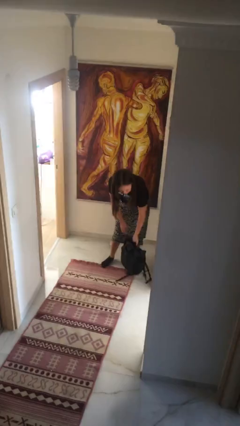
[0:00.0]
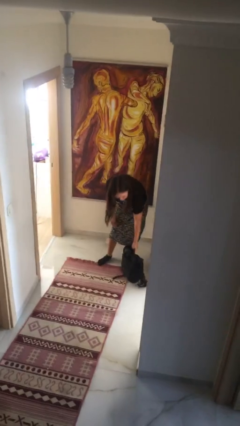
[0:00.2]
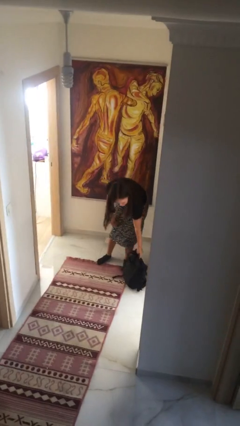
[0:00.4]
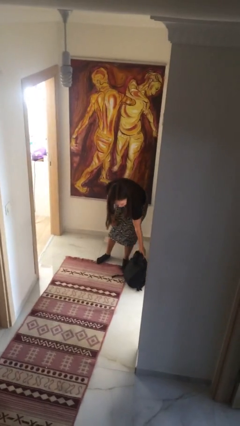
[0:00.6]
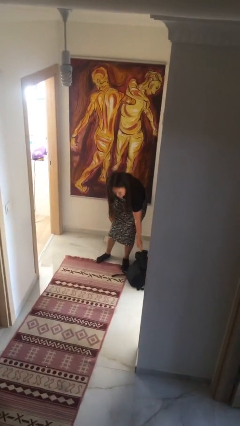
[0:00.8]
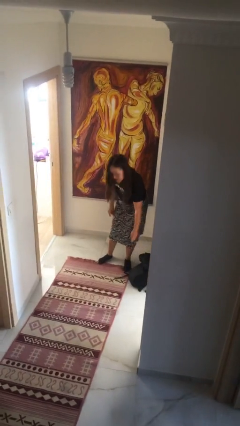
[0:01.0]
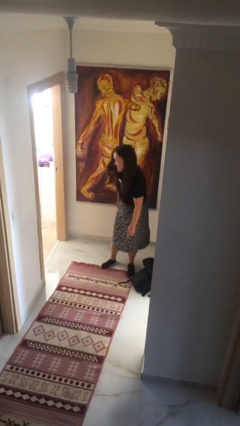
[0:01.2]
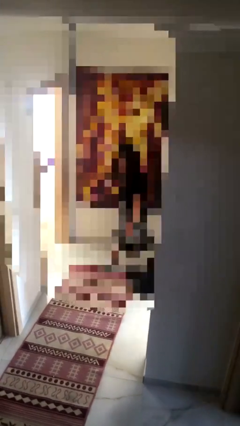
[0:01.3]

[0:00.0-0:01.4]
person puts down object on floor

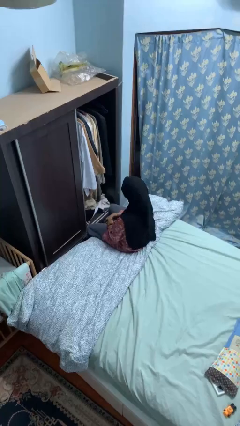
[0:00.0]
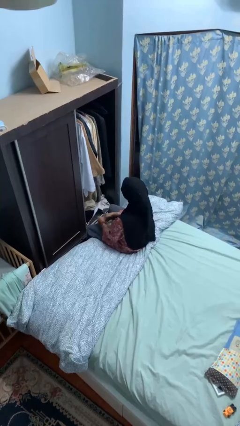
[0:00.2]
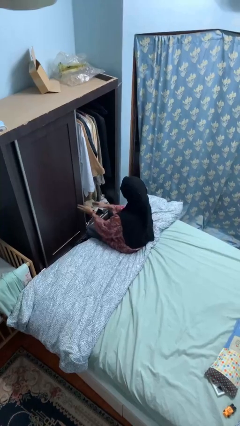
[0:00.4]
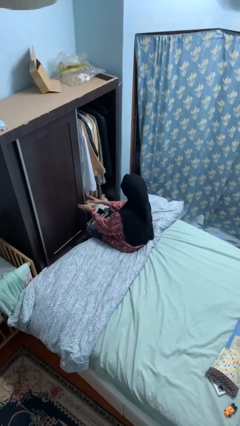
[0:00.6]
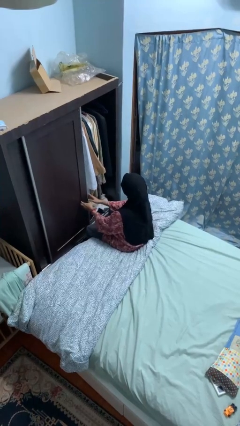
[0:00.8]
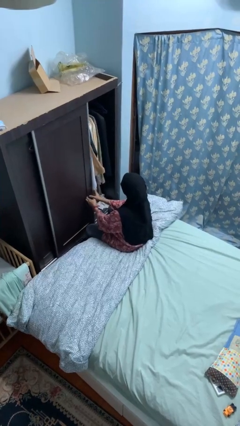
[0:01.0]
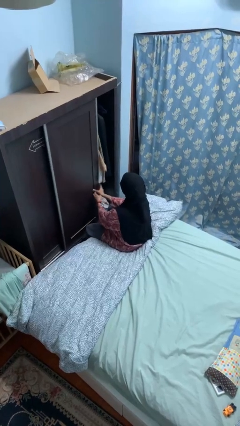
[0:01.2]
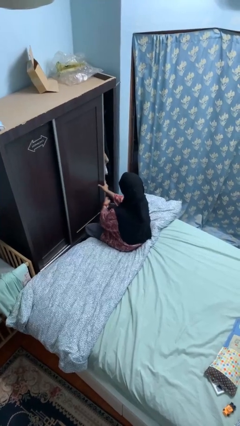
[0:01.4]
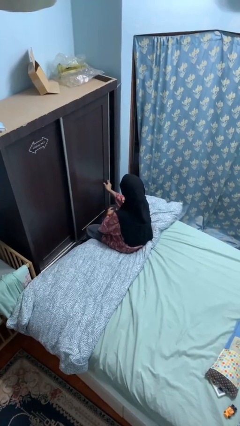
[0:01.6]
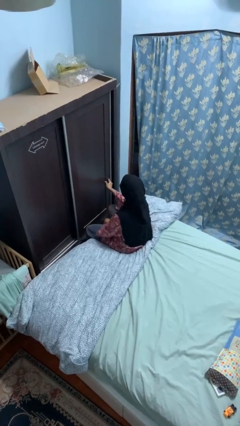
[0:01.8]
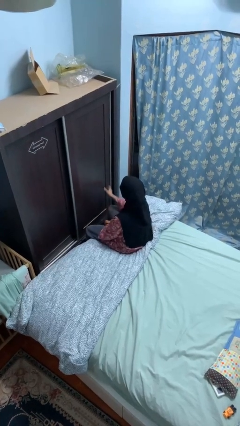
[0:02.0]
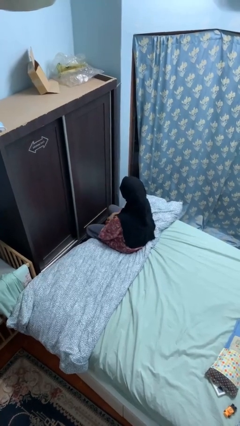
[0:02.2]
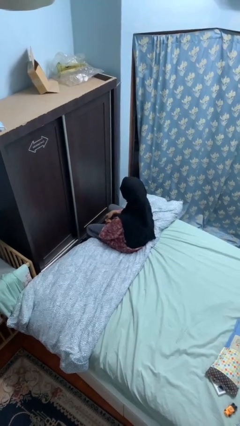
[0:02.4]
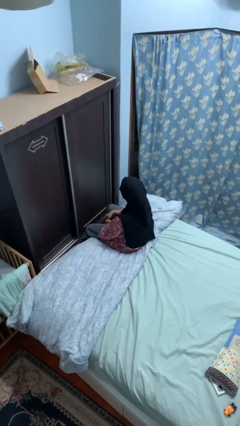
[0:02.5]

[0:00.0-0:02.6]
person closes closet door

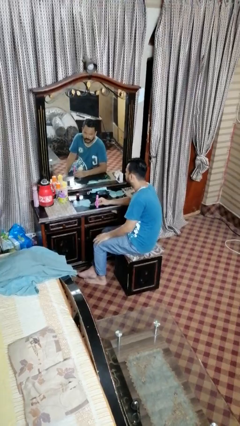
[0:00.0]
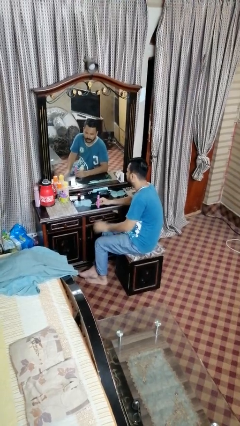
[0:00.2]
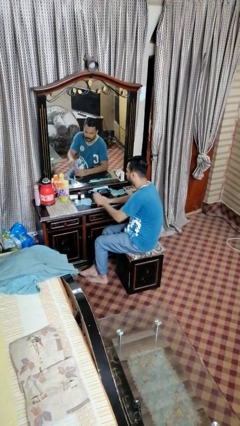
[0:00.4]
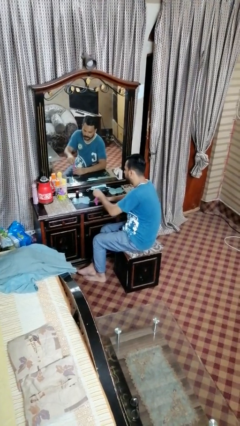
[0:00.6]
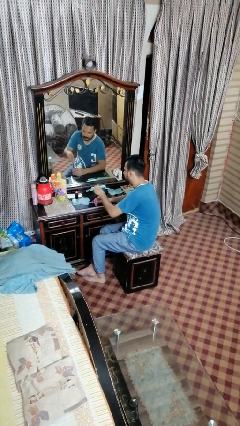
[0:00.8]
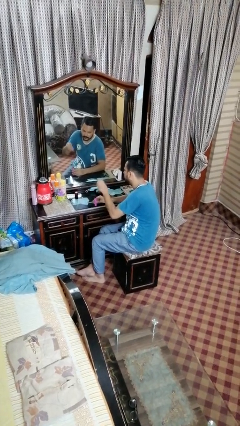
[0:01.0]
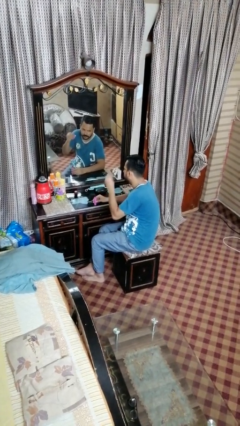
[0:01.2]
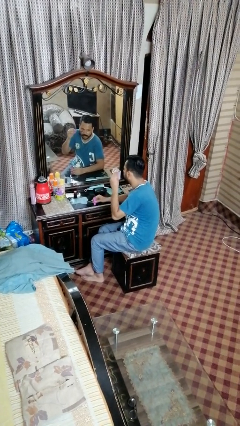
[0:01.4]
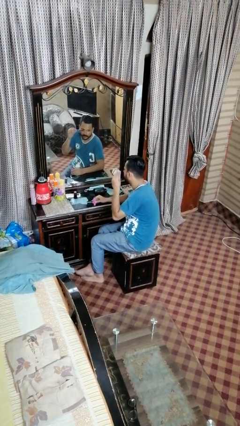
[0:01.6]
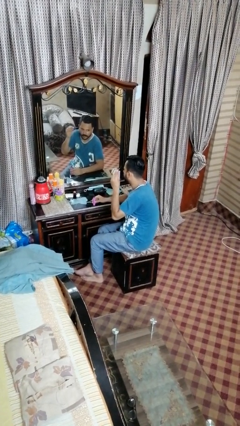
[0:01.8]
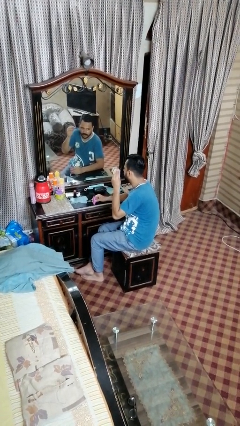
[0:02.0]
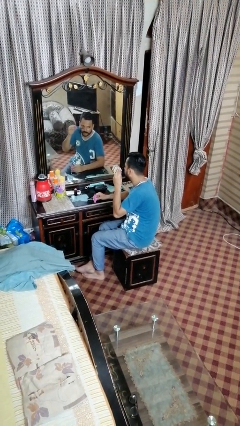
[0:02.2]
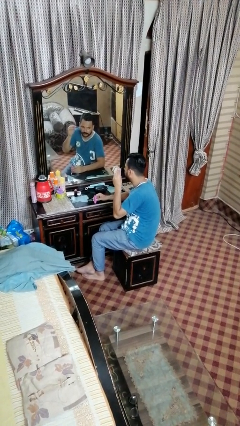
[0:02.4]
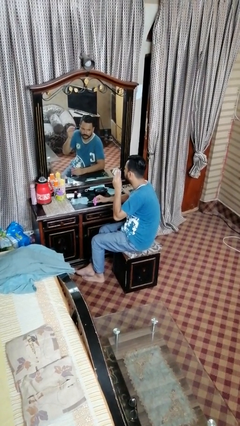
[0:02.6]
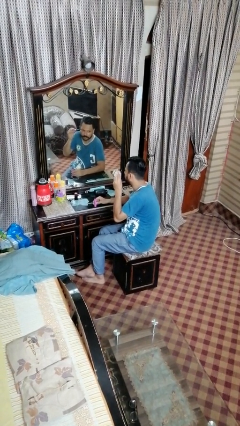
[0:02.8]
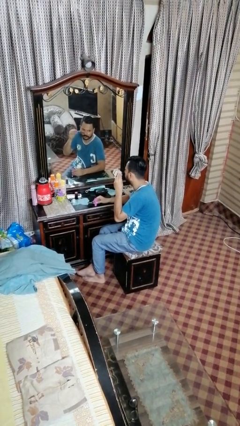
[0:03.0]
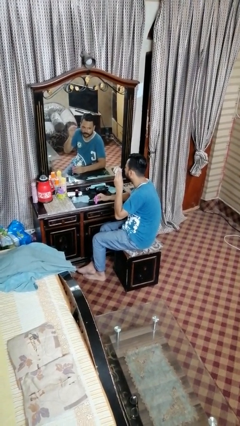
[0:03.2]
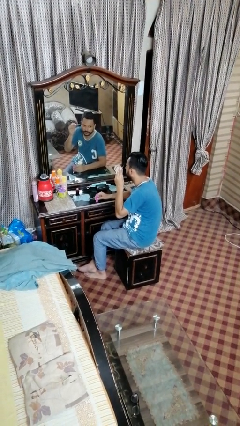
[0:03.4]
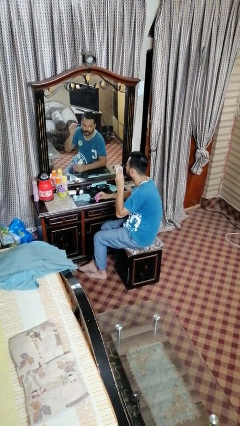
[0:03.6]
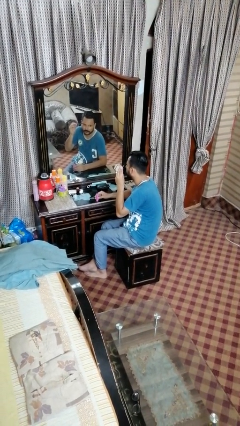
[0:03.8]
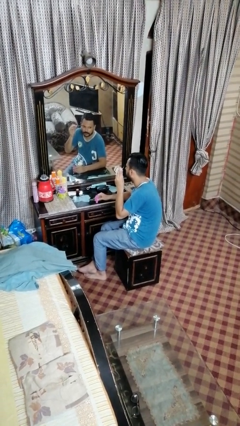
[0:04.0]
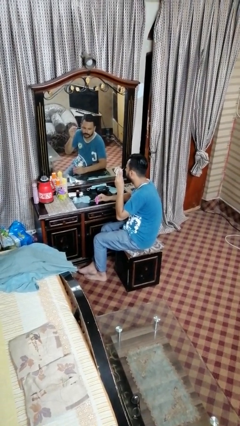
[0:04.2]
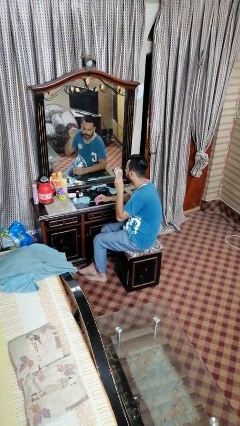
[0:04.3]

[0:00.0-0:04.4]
person applies eye makeup

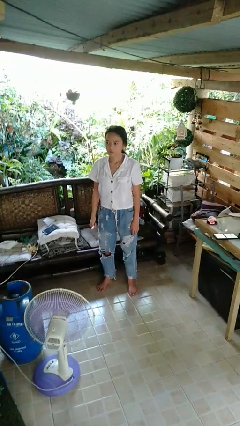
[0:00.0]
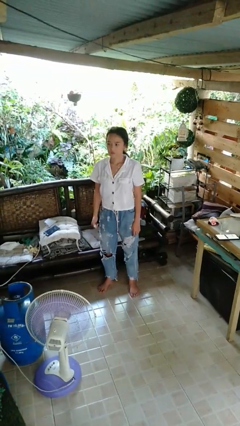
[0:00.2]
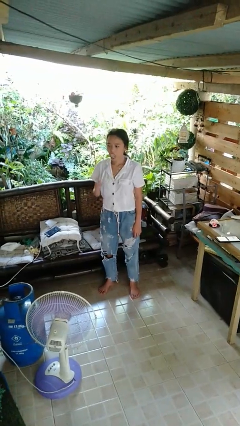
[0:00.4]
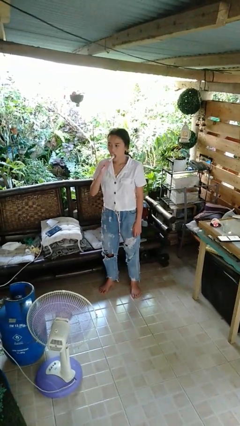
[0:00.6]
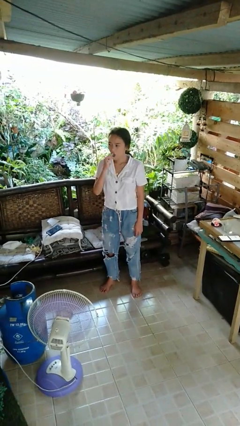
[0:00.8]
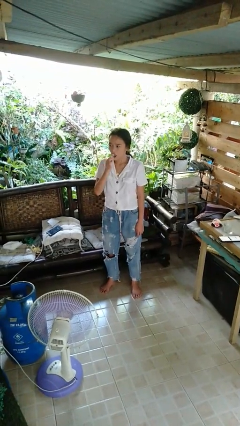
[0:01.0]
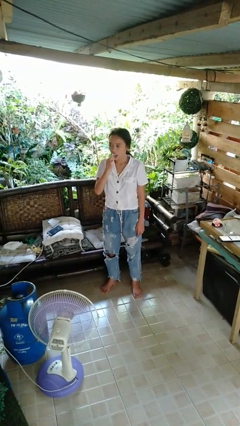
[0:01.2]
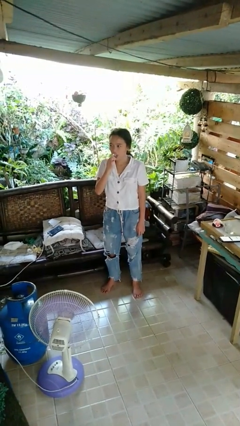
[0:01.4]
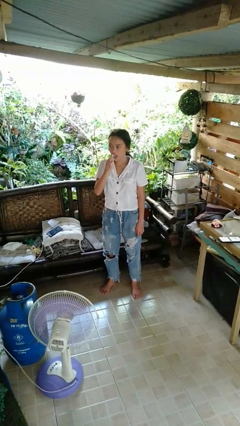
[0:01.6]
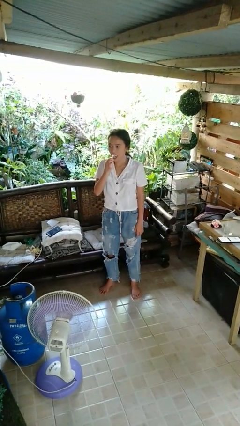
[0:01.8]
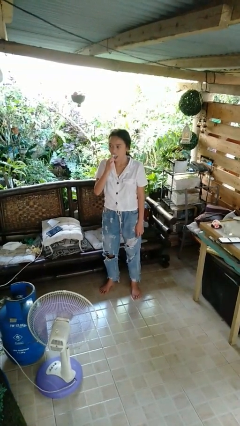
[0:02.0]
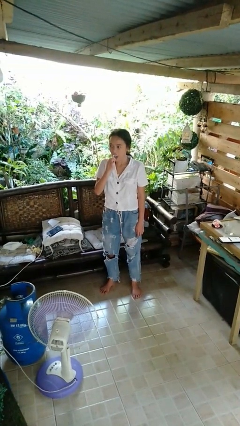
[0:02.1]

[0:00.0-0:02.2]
person brushes teeth

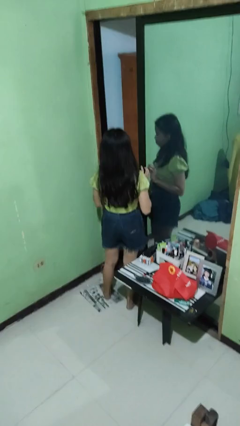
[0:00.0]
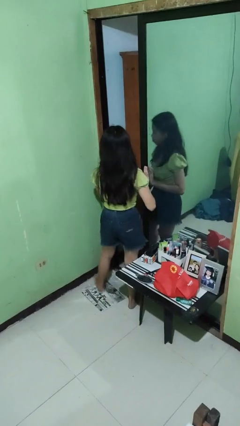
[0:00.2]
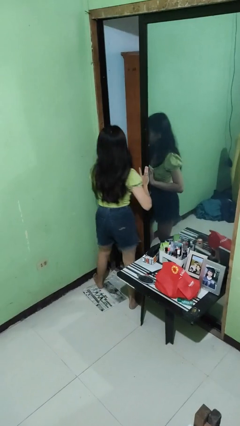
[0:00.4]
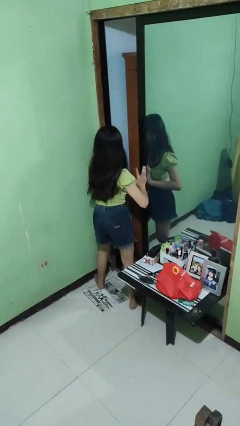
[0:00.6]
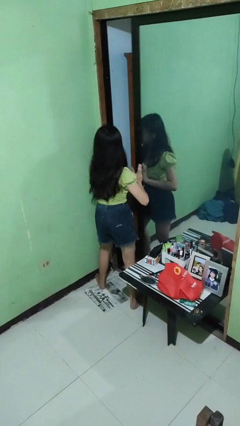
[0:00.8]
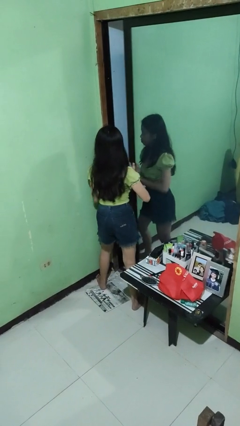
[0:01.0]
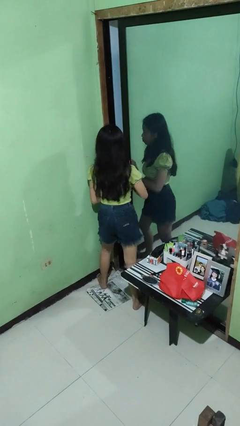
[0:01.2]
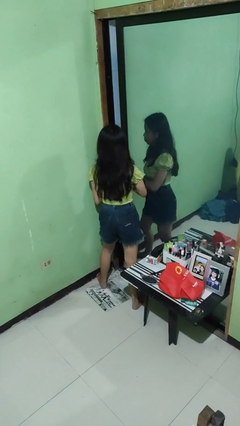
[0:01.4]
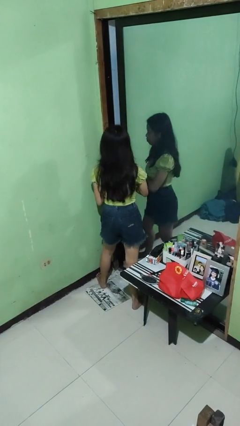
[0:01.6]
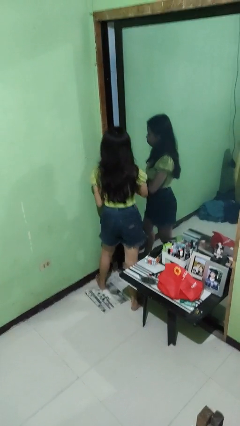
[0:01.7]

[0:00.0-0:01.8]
person closes sliding door

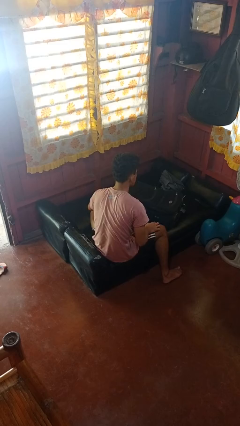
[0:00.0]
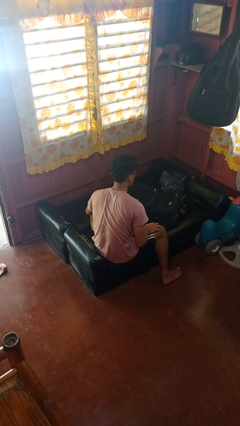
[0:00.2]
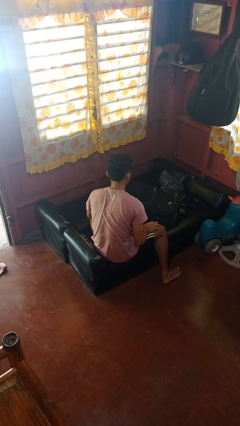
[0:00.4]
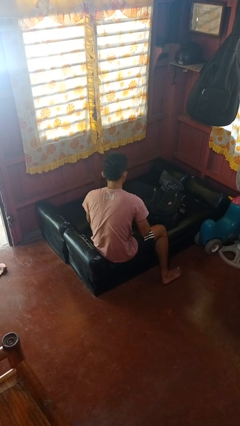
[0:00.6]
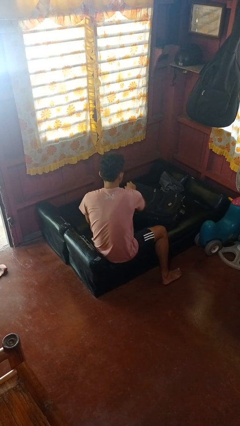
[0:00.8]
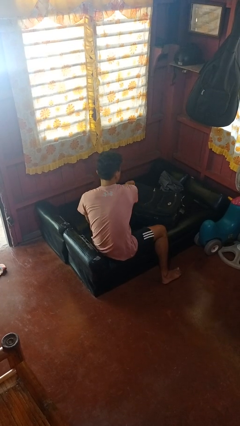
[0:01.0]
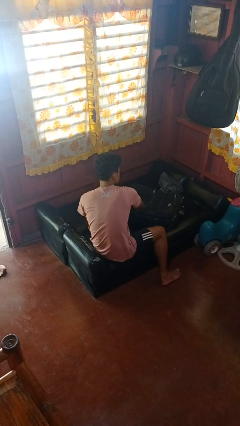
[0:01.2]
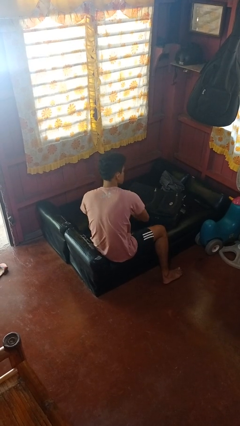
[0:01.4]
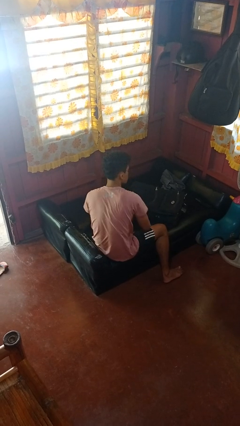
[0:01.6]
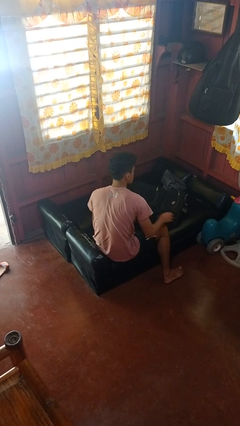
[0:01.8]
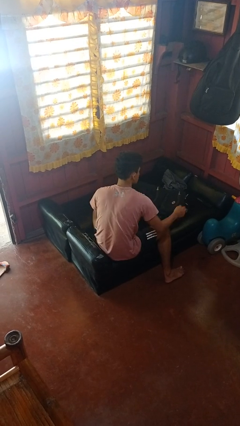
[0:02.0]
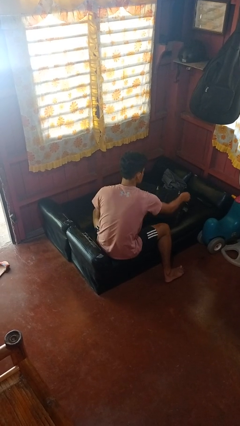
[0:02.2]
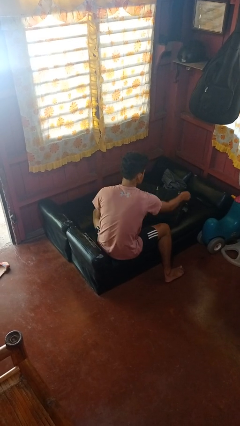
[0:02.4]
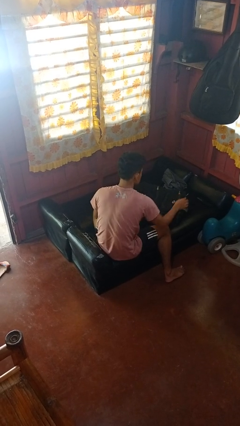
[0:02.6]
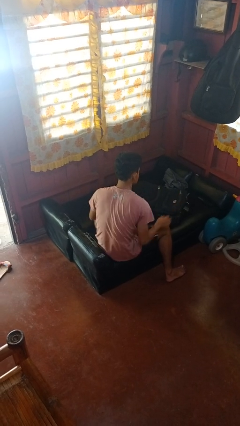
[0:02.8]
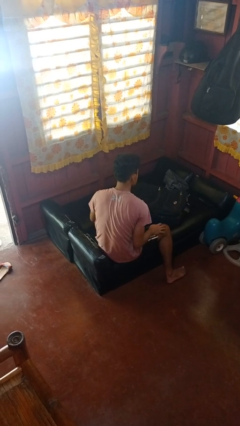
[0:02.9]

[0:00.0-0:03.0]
person closes suitcase

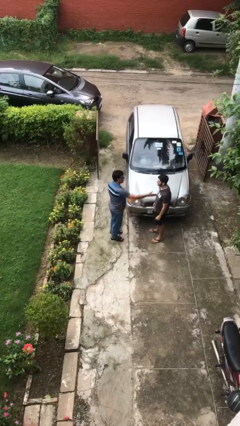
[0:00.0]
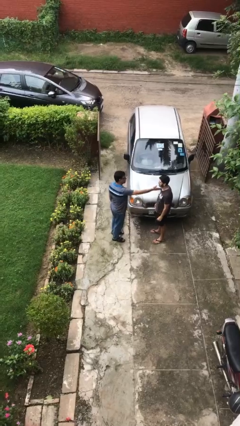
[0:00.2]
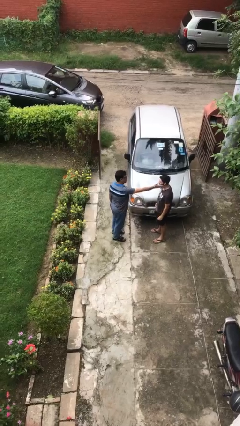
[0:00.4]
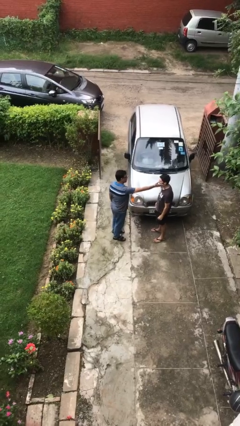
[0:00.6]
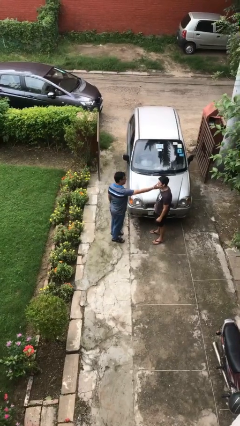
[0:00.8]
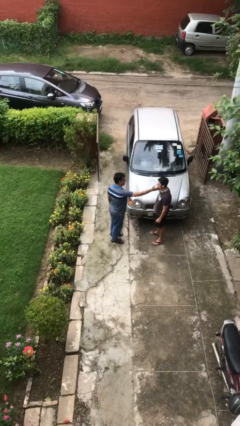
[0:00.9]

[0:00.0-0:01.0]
person touches face of person

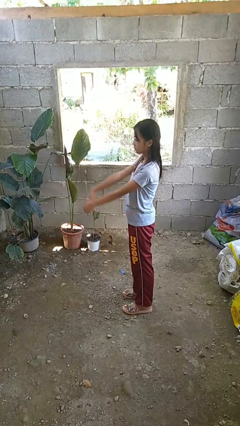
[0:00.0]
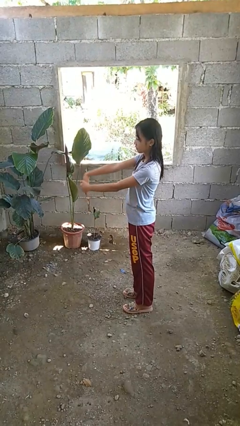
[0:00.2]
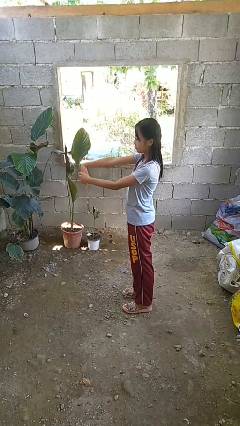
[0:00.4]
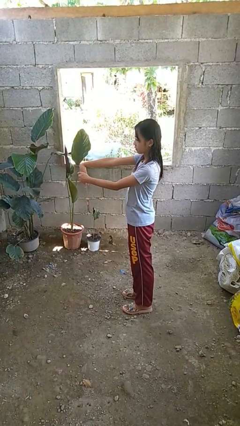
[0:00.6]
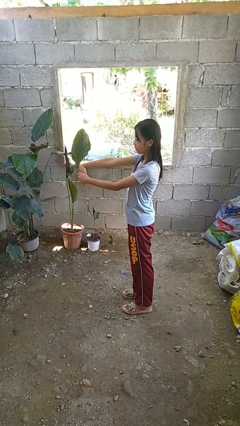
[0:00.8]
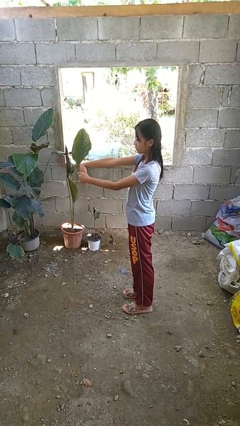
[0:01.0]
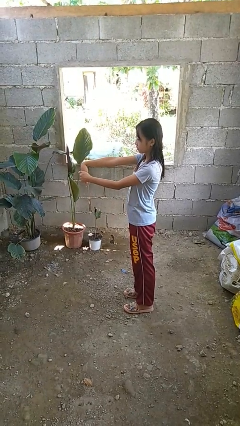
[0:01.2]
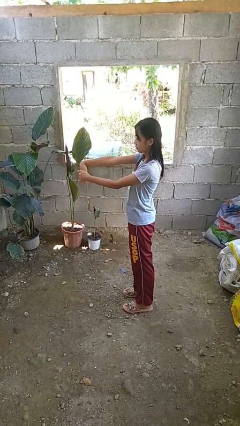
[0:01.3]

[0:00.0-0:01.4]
person cracks knuckles
